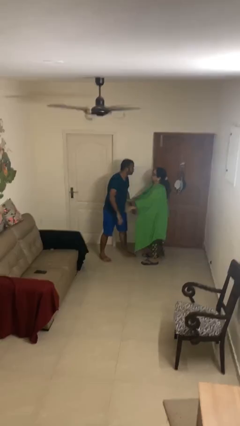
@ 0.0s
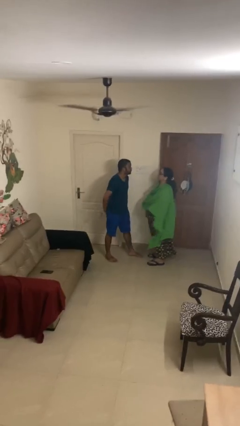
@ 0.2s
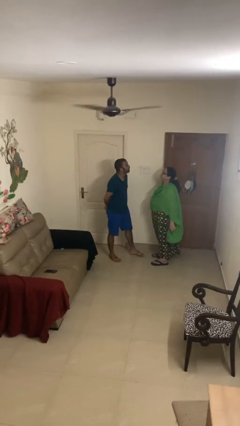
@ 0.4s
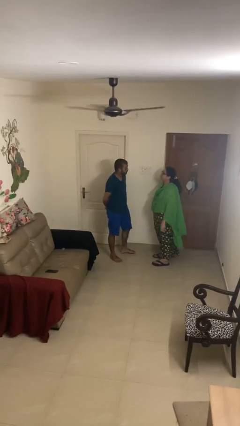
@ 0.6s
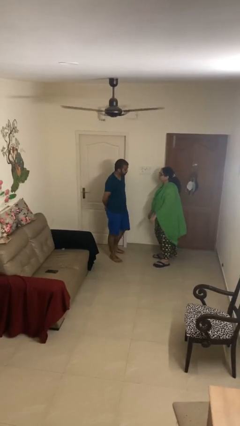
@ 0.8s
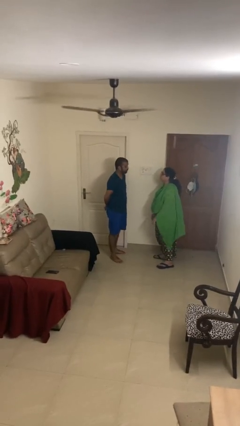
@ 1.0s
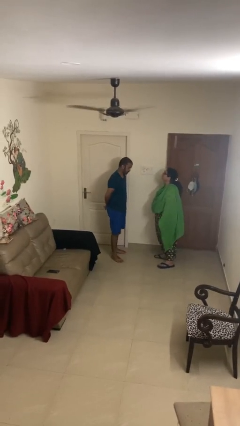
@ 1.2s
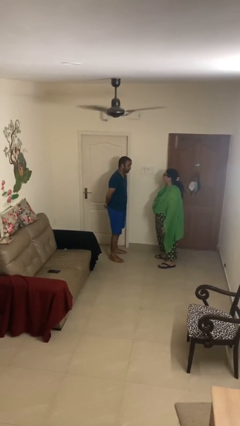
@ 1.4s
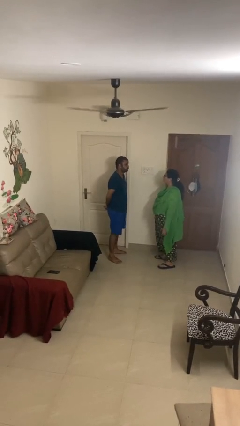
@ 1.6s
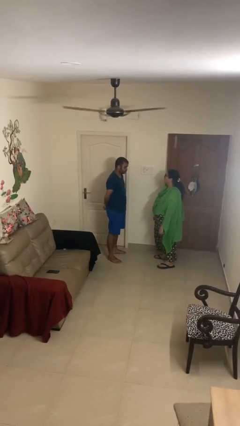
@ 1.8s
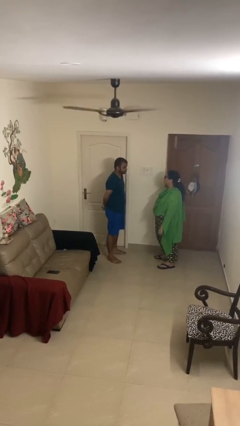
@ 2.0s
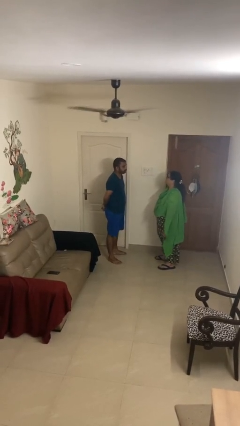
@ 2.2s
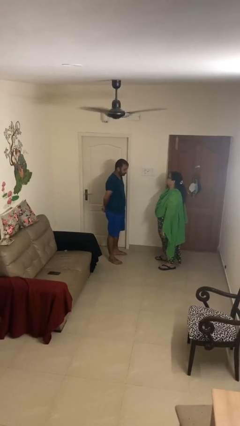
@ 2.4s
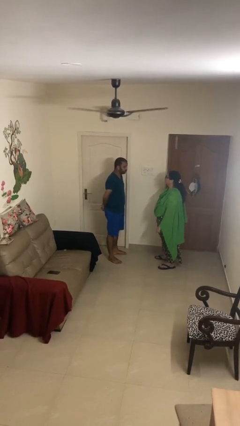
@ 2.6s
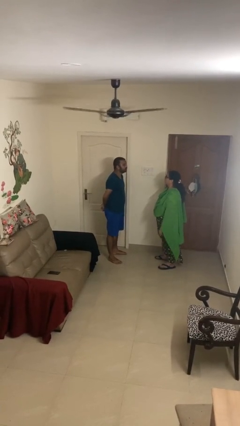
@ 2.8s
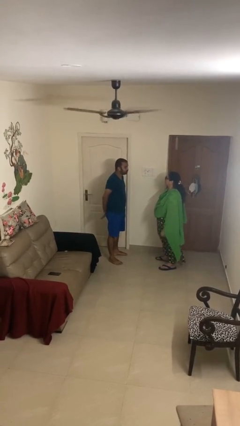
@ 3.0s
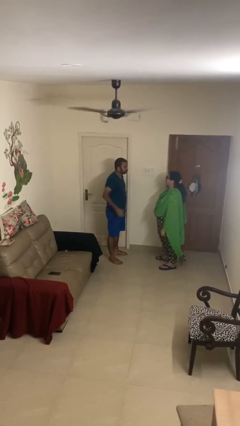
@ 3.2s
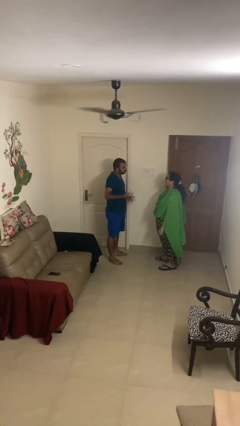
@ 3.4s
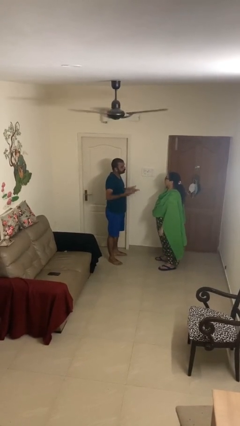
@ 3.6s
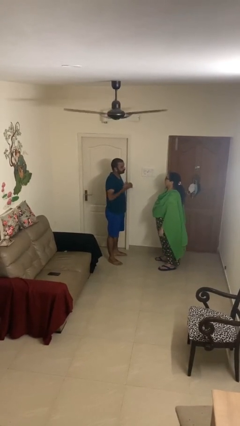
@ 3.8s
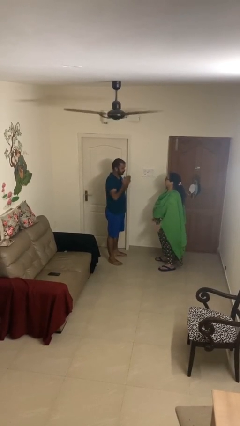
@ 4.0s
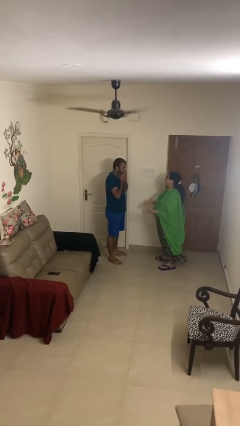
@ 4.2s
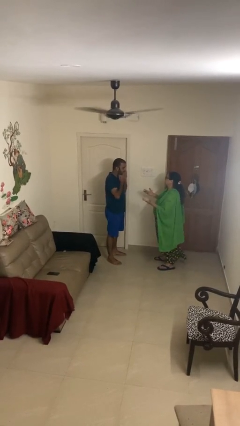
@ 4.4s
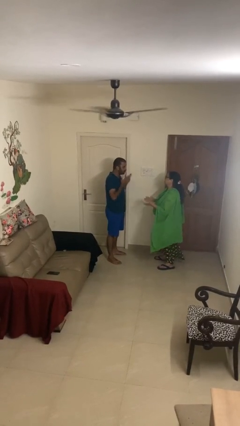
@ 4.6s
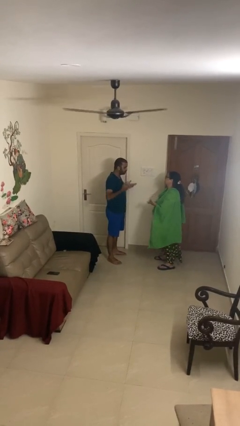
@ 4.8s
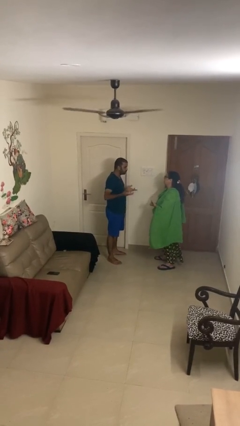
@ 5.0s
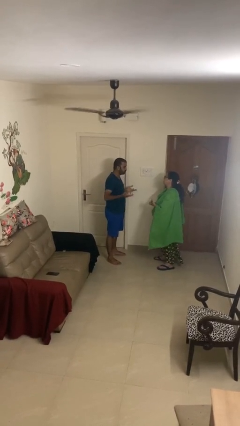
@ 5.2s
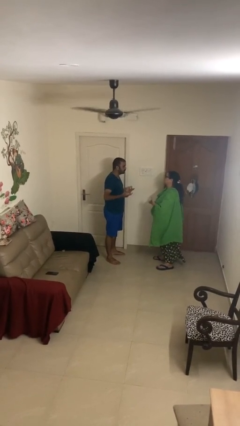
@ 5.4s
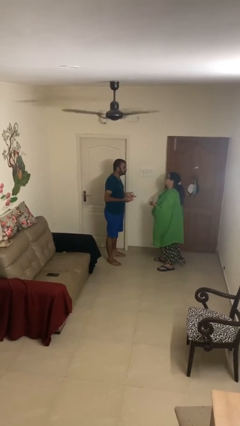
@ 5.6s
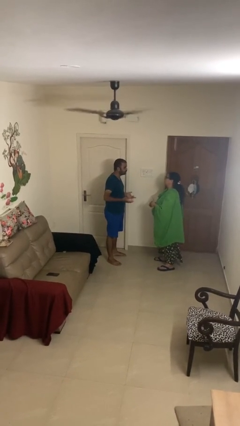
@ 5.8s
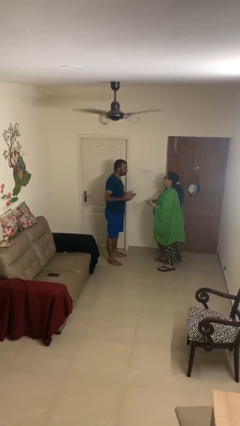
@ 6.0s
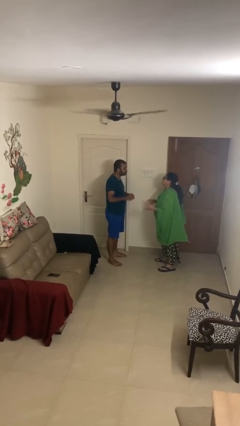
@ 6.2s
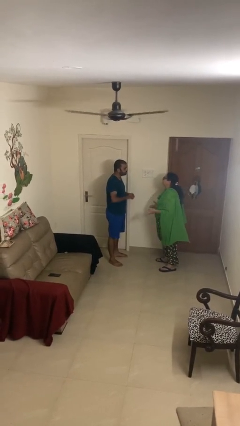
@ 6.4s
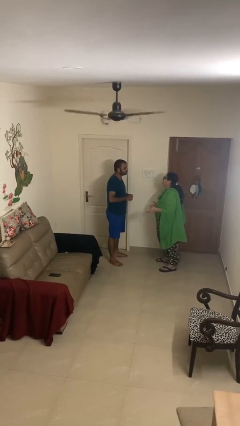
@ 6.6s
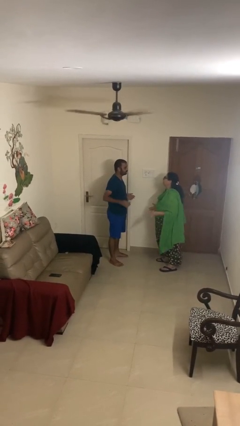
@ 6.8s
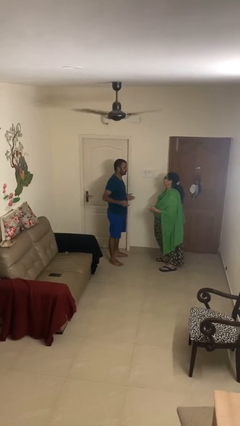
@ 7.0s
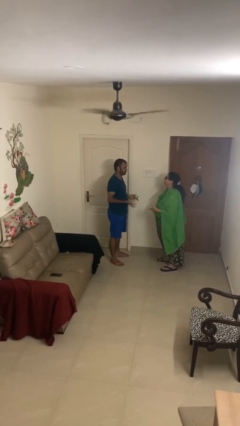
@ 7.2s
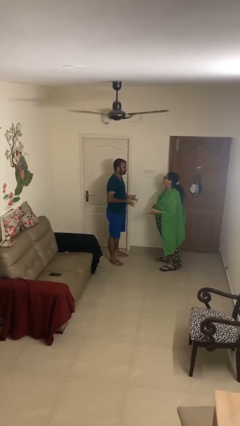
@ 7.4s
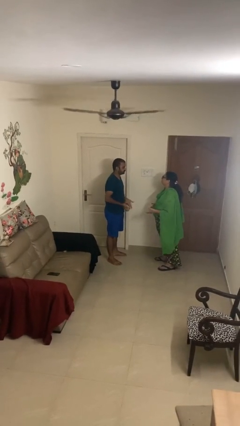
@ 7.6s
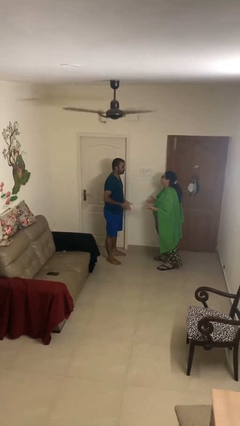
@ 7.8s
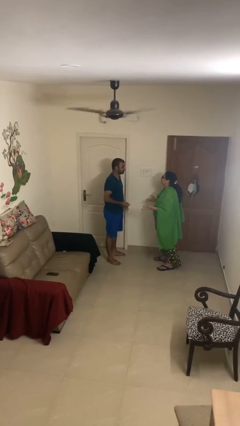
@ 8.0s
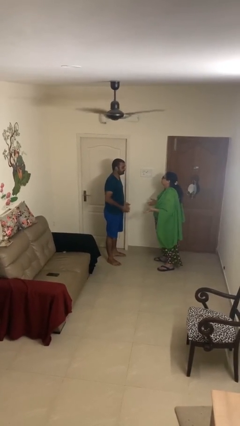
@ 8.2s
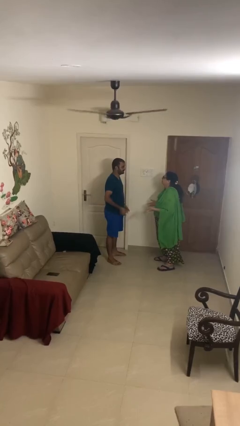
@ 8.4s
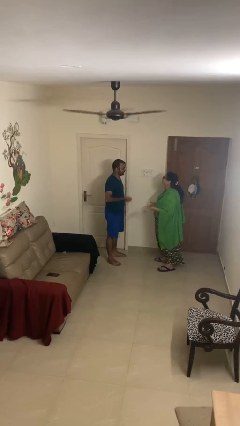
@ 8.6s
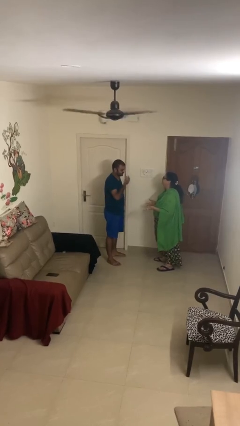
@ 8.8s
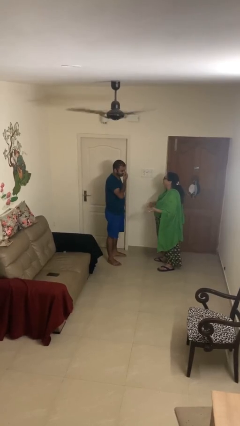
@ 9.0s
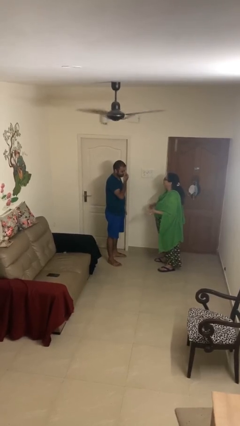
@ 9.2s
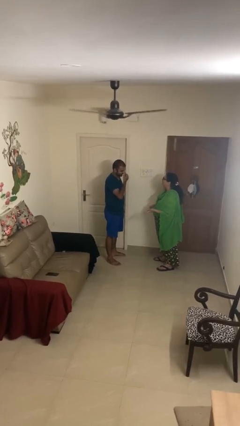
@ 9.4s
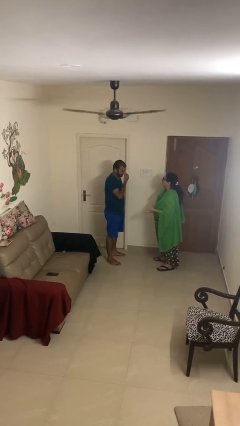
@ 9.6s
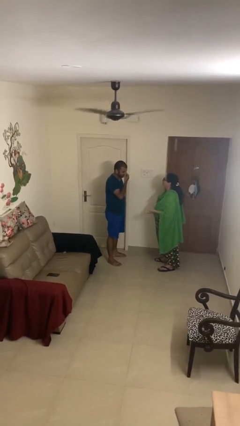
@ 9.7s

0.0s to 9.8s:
person talks to person

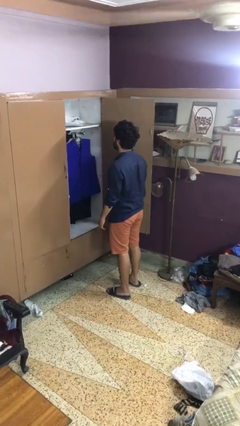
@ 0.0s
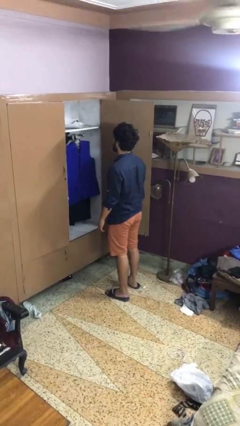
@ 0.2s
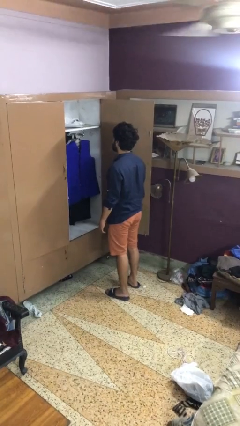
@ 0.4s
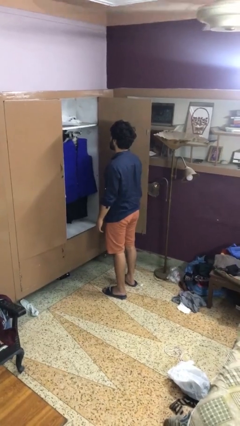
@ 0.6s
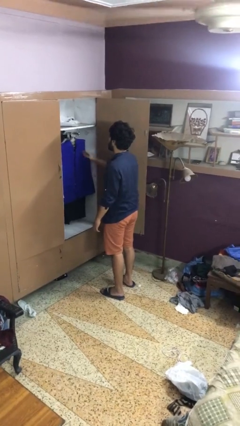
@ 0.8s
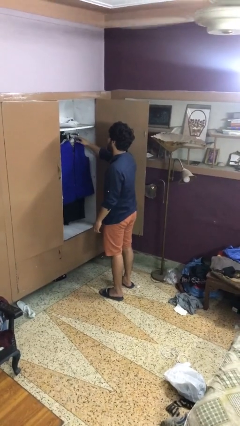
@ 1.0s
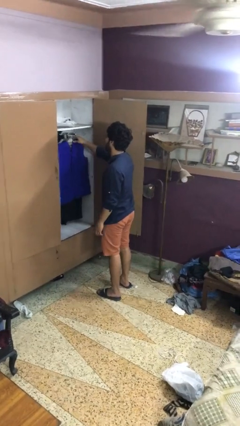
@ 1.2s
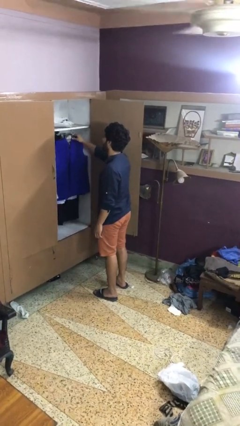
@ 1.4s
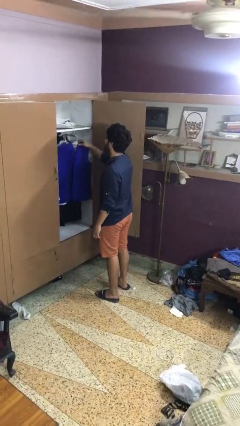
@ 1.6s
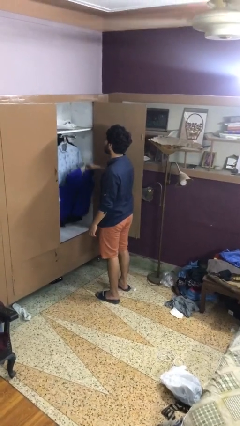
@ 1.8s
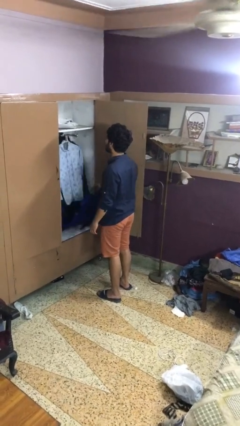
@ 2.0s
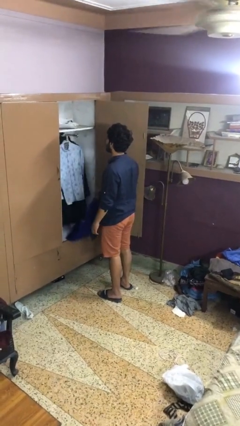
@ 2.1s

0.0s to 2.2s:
person takes clothes from closet

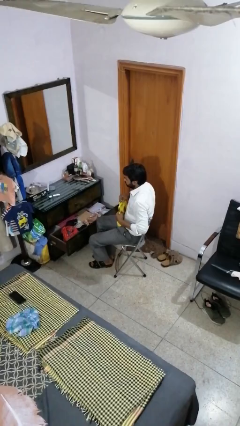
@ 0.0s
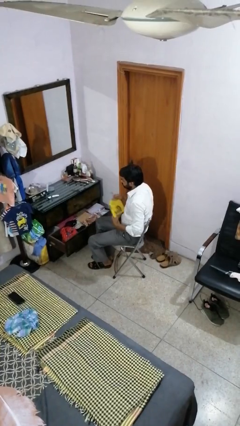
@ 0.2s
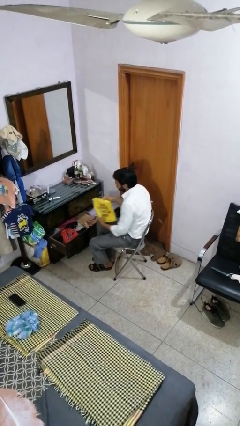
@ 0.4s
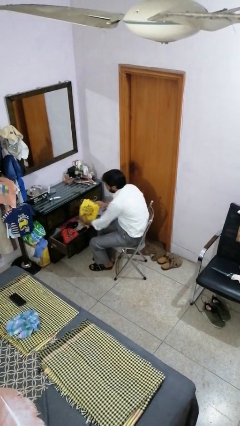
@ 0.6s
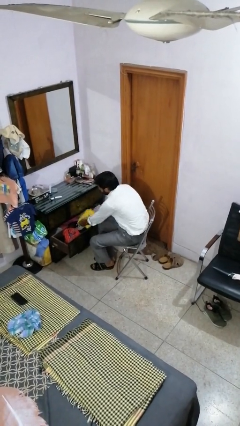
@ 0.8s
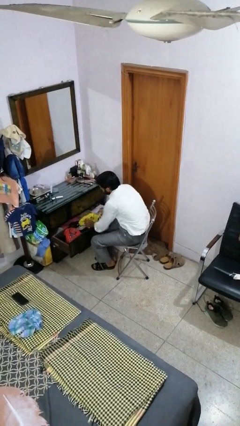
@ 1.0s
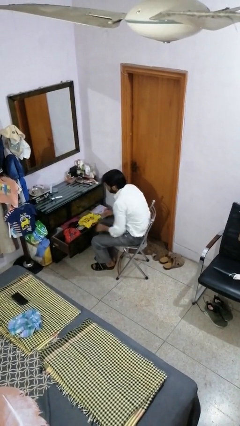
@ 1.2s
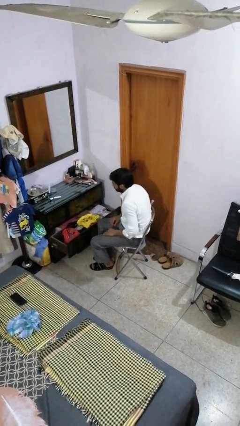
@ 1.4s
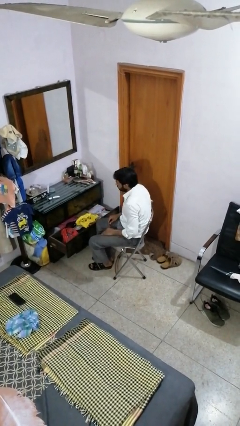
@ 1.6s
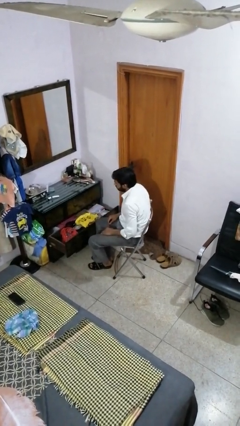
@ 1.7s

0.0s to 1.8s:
person puts clothes into dresser

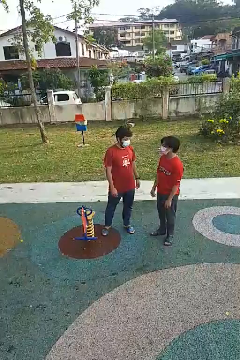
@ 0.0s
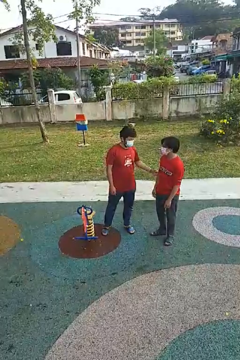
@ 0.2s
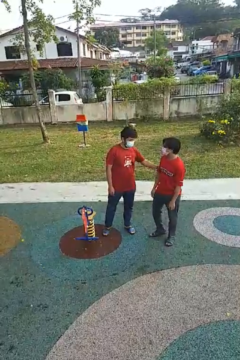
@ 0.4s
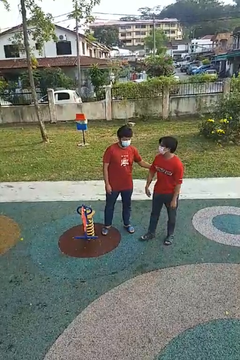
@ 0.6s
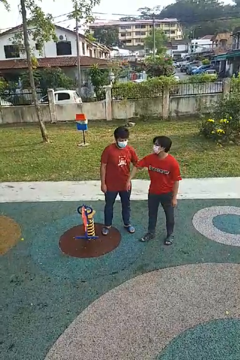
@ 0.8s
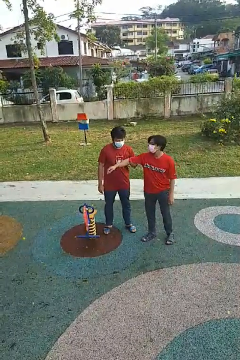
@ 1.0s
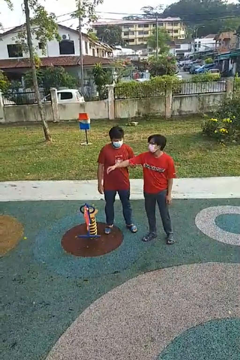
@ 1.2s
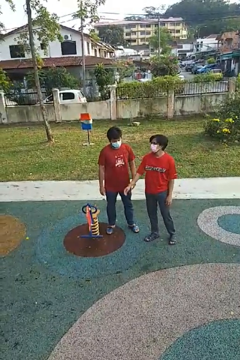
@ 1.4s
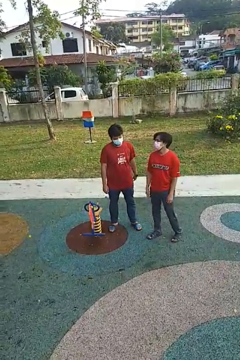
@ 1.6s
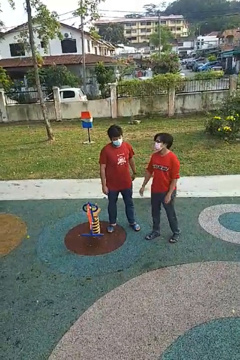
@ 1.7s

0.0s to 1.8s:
person grabs person by bicep

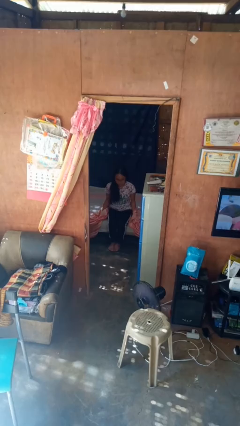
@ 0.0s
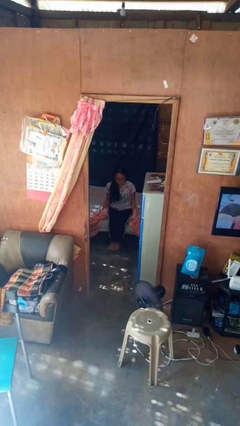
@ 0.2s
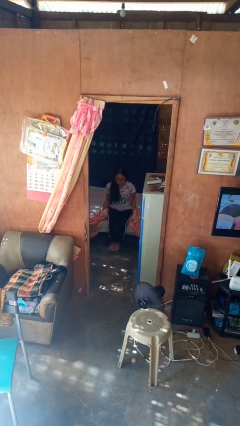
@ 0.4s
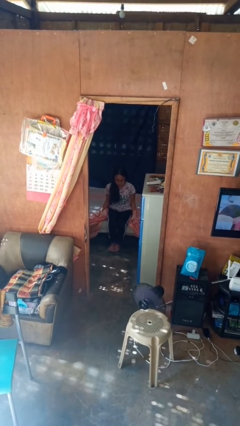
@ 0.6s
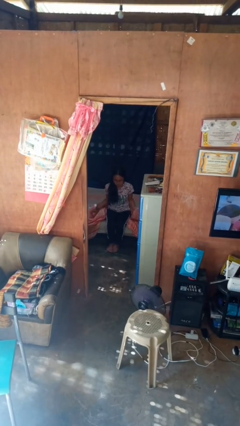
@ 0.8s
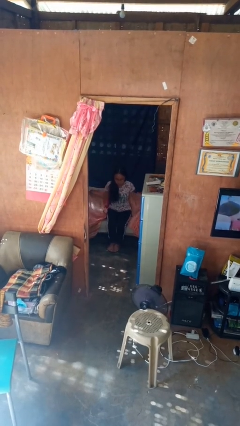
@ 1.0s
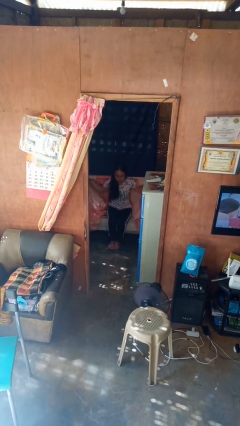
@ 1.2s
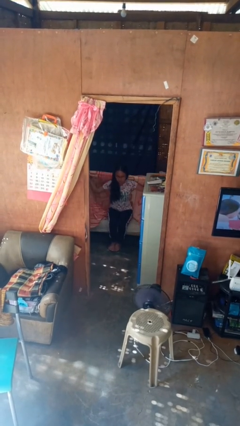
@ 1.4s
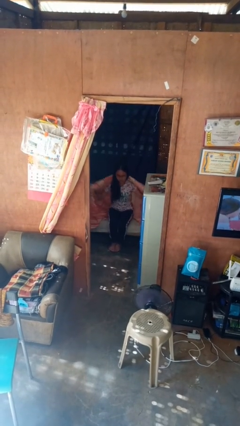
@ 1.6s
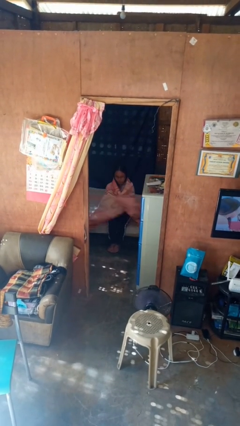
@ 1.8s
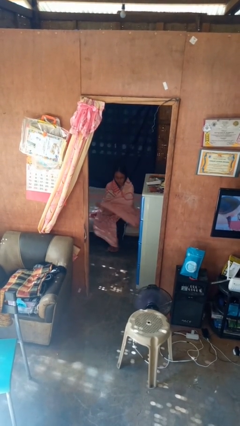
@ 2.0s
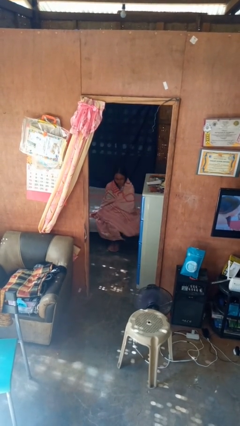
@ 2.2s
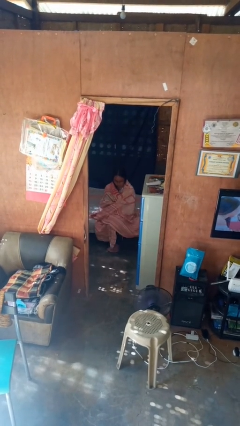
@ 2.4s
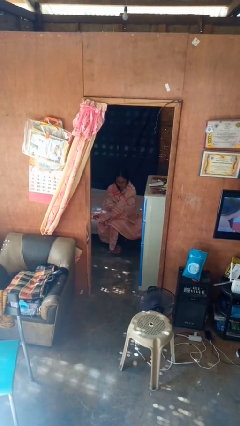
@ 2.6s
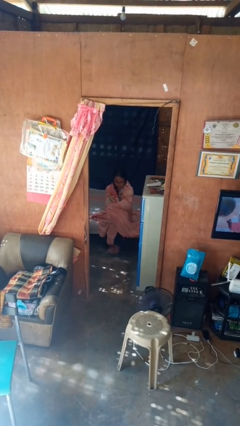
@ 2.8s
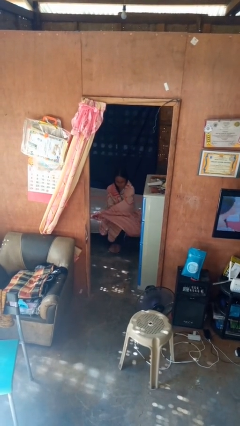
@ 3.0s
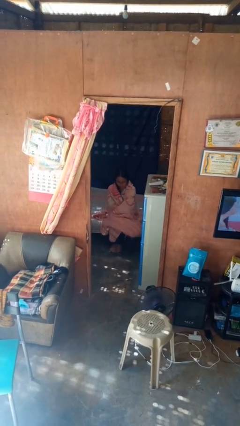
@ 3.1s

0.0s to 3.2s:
person covers with blanket
